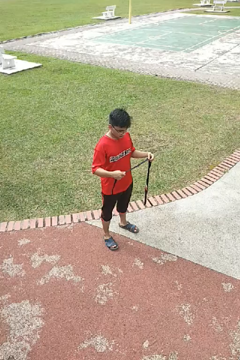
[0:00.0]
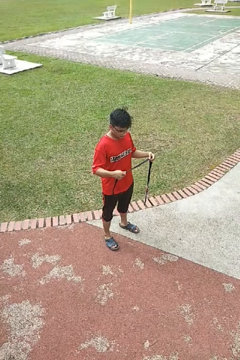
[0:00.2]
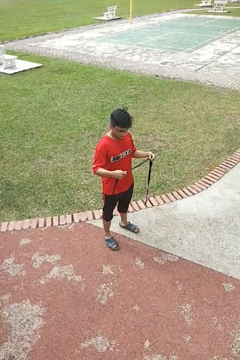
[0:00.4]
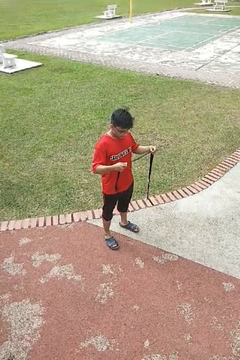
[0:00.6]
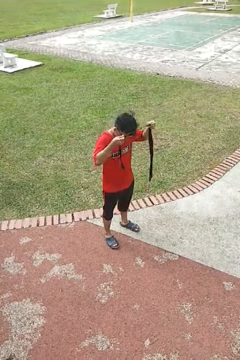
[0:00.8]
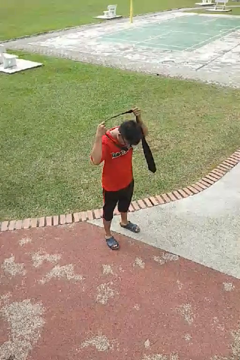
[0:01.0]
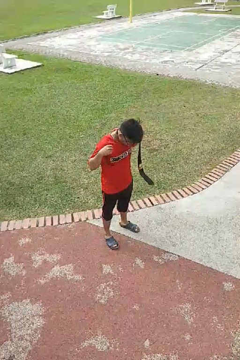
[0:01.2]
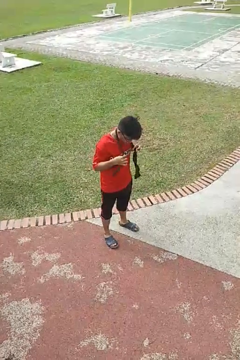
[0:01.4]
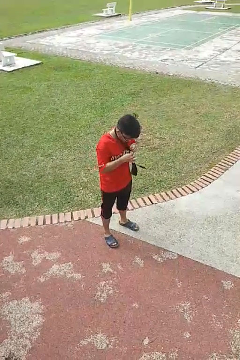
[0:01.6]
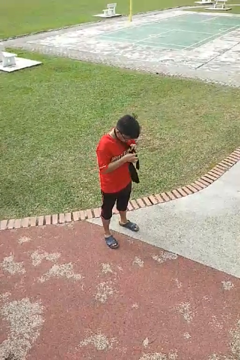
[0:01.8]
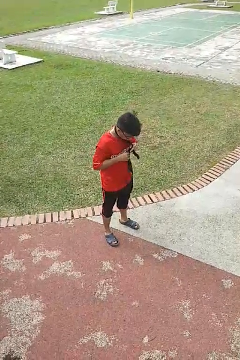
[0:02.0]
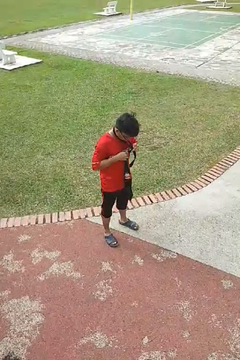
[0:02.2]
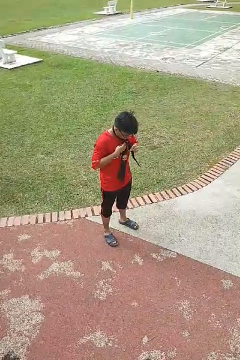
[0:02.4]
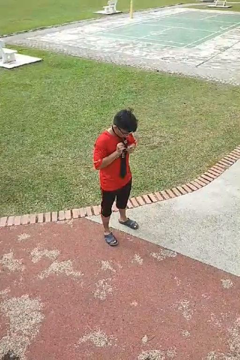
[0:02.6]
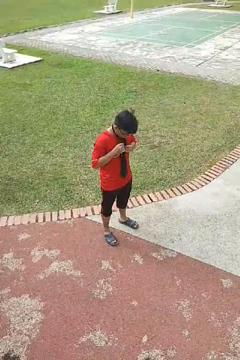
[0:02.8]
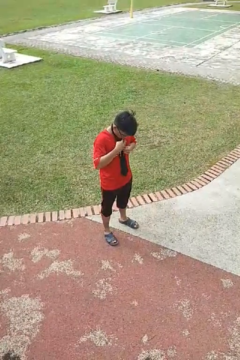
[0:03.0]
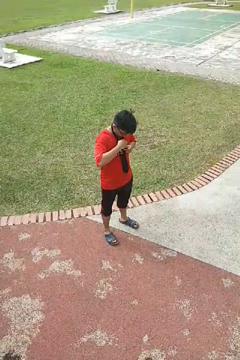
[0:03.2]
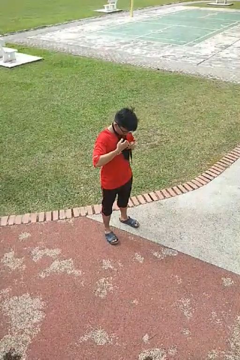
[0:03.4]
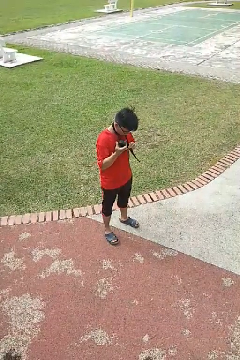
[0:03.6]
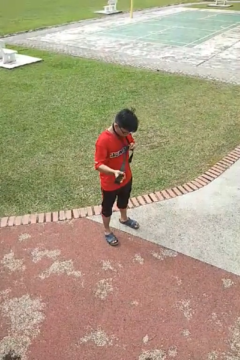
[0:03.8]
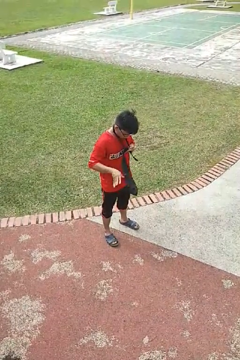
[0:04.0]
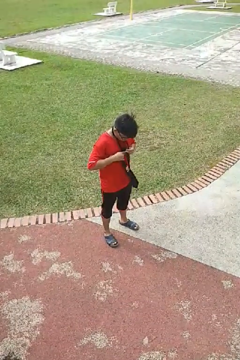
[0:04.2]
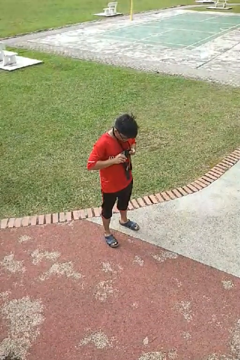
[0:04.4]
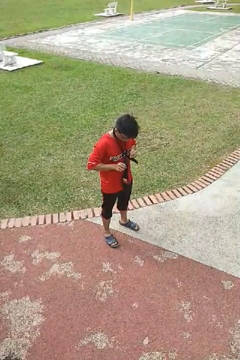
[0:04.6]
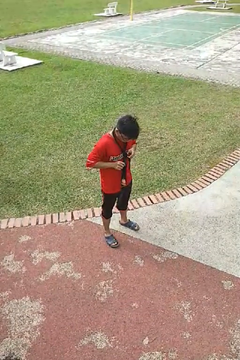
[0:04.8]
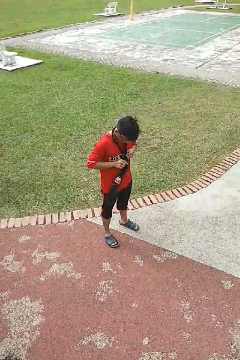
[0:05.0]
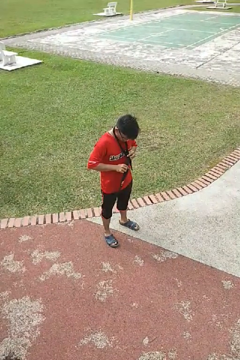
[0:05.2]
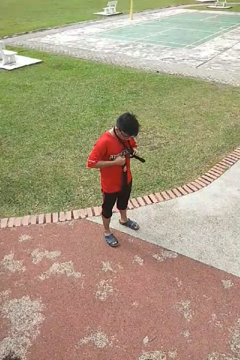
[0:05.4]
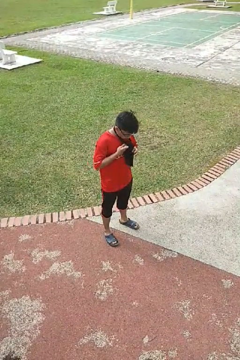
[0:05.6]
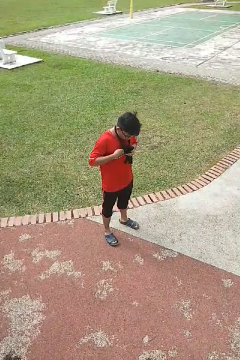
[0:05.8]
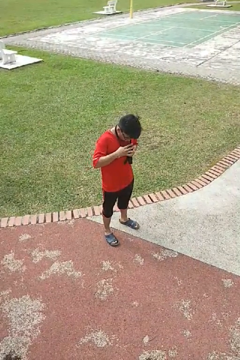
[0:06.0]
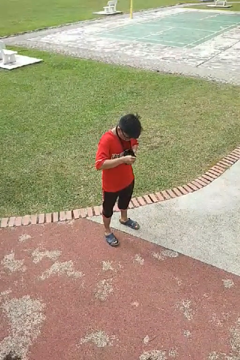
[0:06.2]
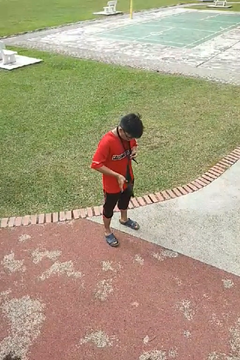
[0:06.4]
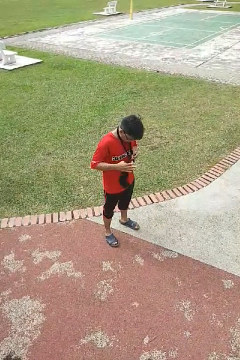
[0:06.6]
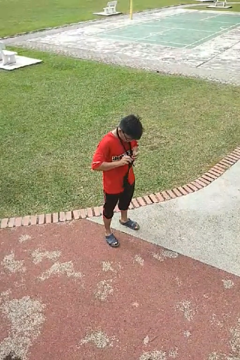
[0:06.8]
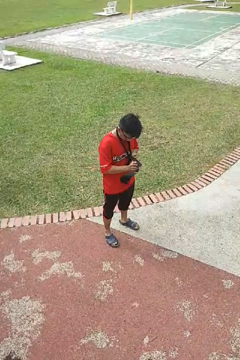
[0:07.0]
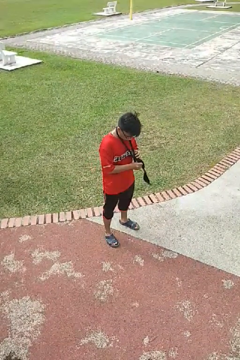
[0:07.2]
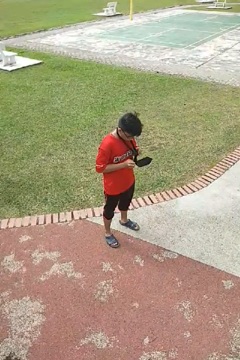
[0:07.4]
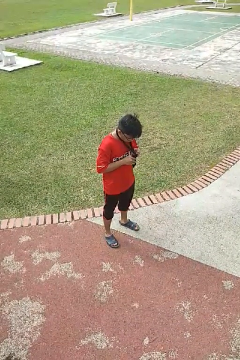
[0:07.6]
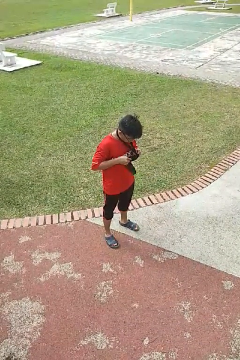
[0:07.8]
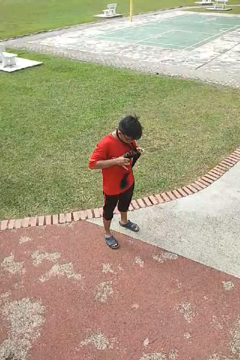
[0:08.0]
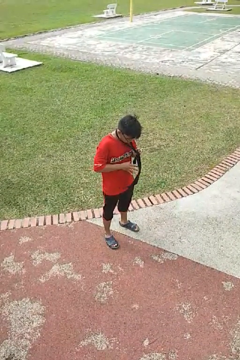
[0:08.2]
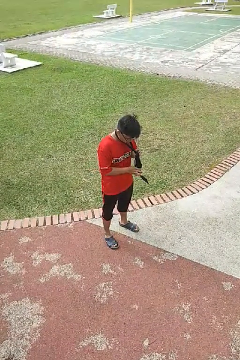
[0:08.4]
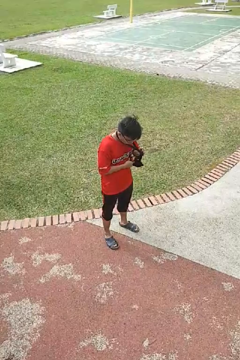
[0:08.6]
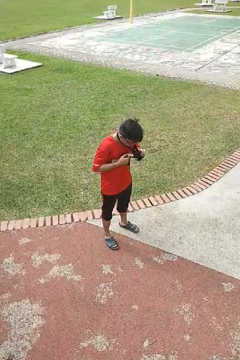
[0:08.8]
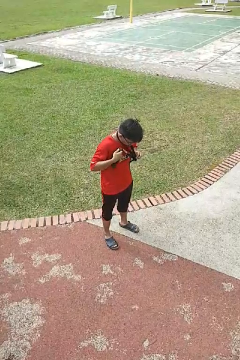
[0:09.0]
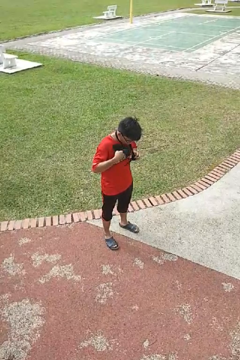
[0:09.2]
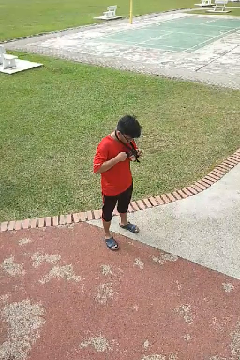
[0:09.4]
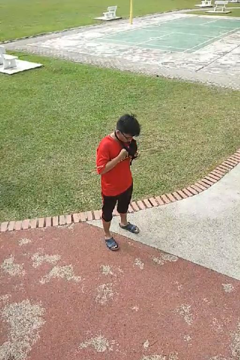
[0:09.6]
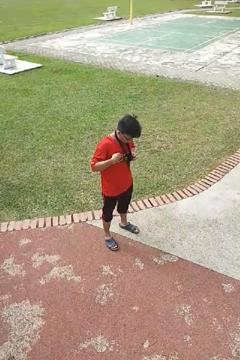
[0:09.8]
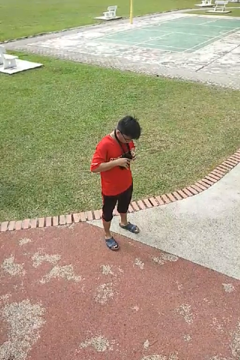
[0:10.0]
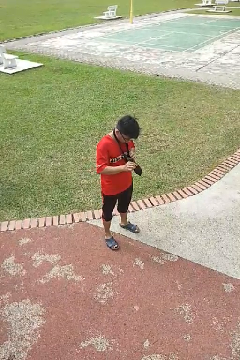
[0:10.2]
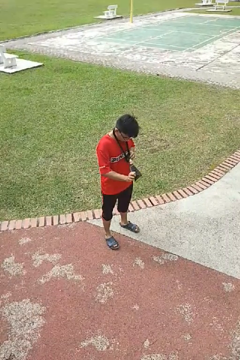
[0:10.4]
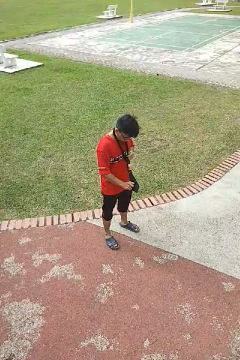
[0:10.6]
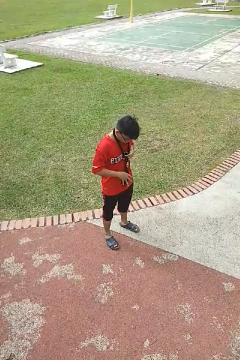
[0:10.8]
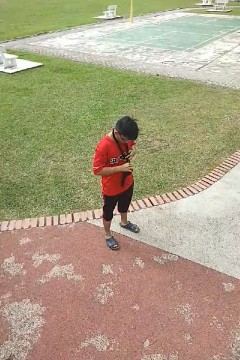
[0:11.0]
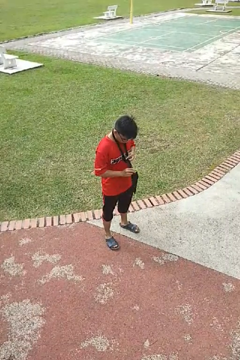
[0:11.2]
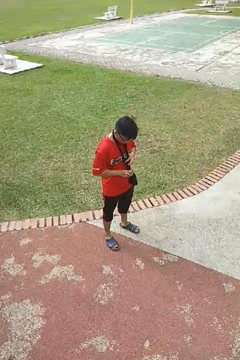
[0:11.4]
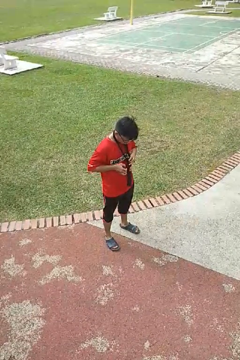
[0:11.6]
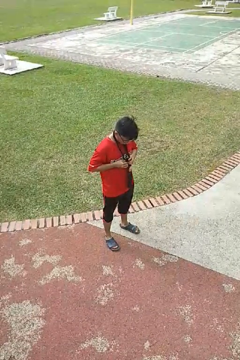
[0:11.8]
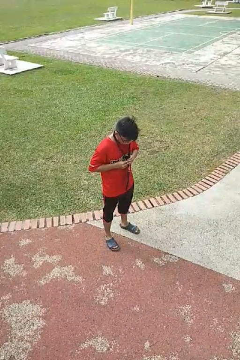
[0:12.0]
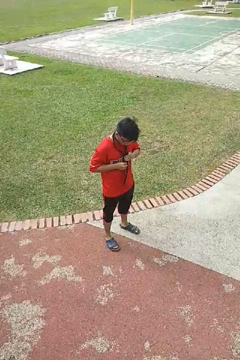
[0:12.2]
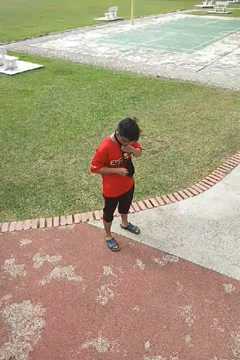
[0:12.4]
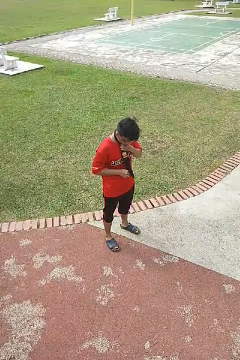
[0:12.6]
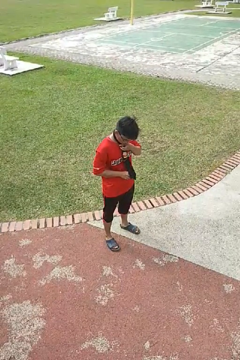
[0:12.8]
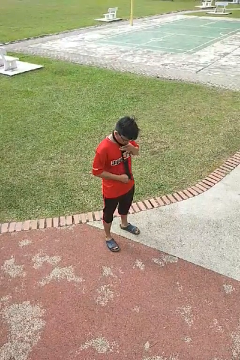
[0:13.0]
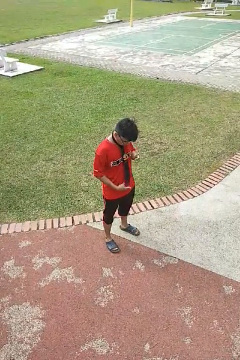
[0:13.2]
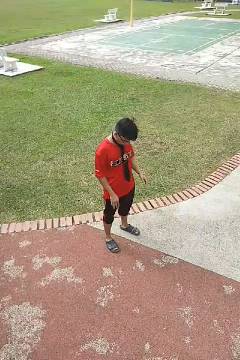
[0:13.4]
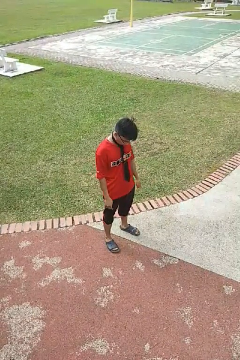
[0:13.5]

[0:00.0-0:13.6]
person puts on necktie

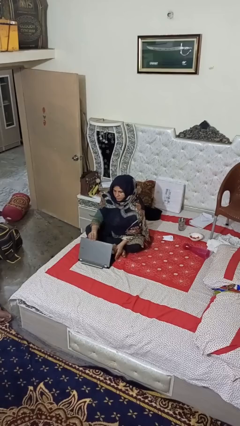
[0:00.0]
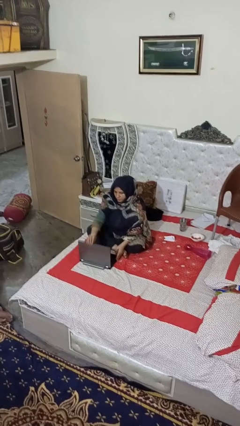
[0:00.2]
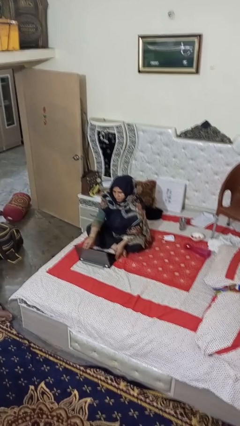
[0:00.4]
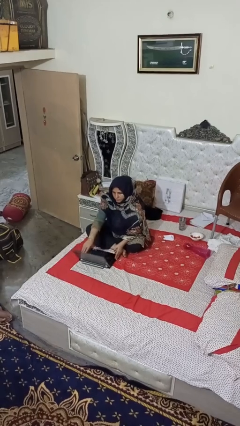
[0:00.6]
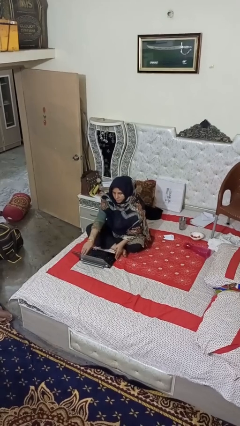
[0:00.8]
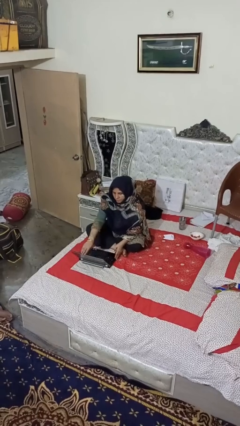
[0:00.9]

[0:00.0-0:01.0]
person opens laptop

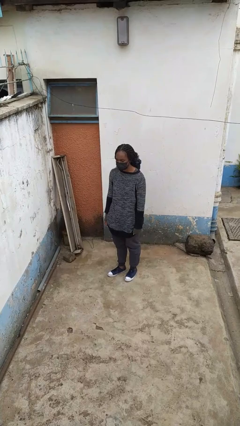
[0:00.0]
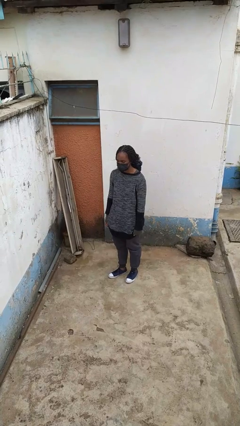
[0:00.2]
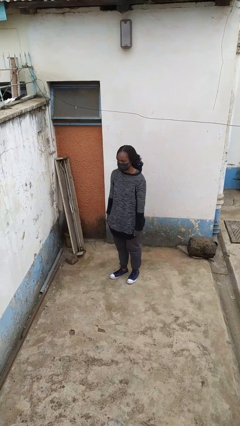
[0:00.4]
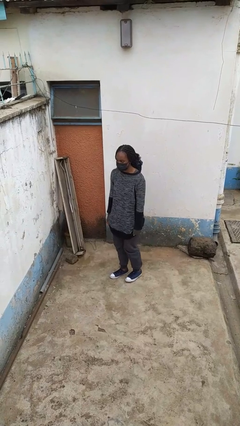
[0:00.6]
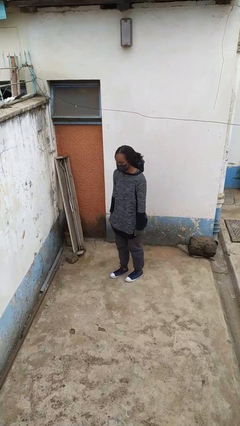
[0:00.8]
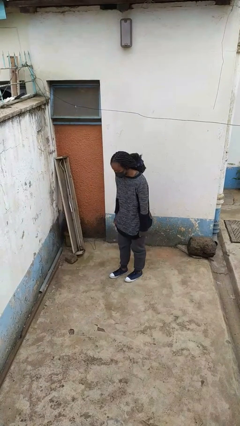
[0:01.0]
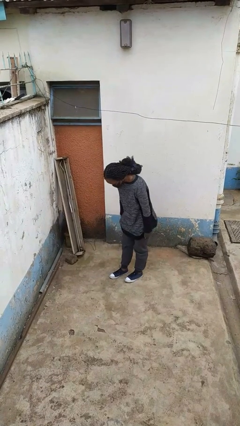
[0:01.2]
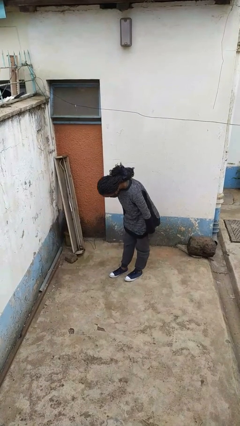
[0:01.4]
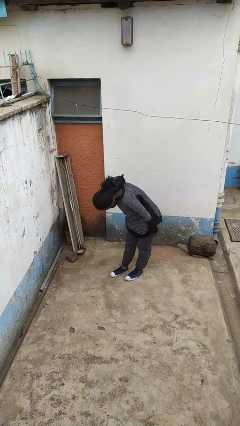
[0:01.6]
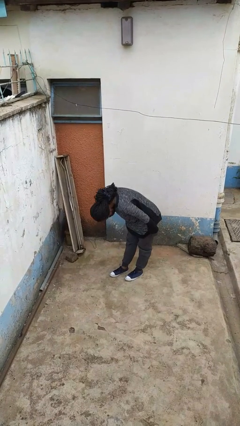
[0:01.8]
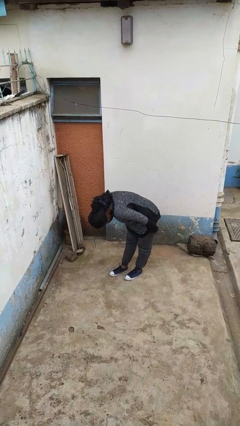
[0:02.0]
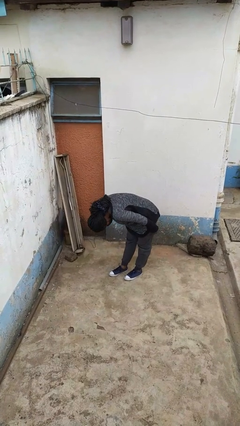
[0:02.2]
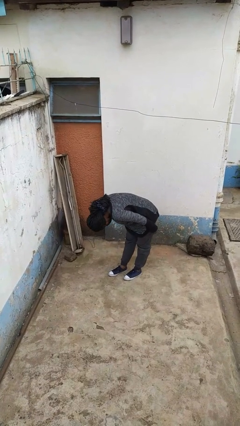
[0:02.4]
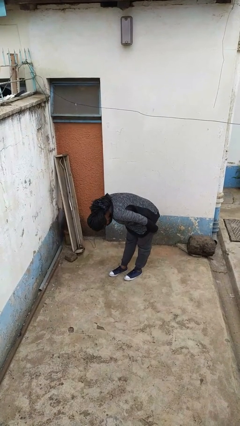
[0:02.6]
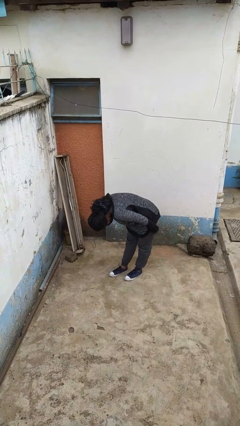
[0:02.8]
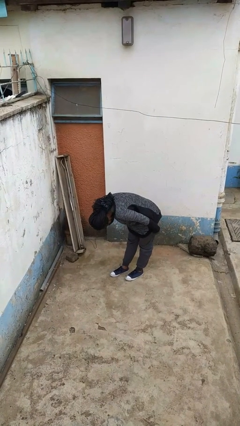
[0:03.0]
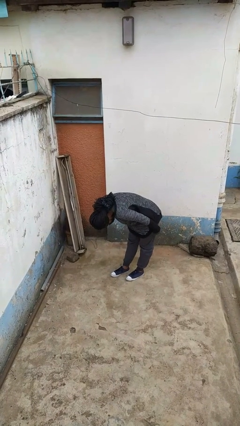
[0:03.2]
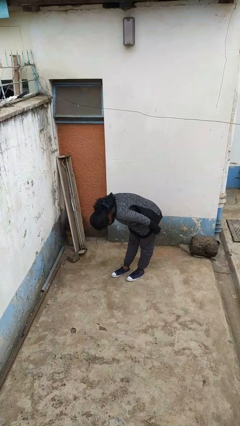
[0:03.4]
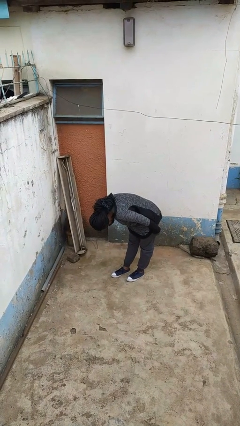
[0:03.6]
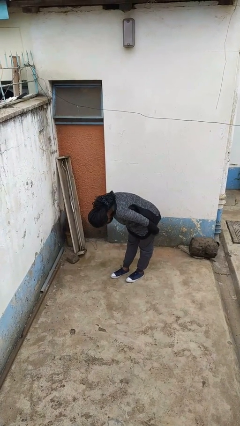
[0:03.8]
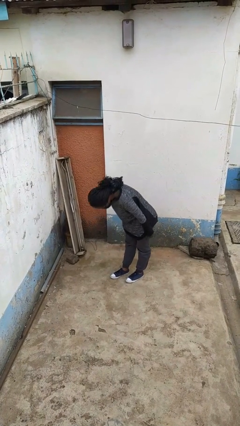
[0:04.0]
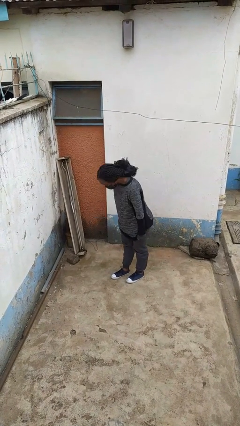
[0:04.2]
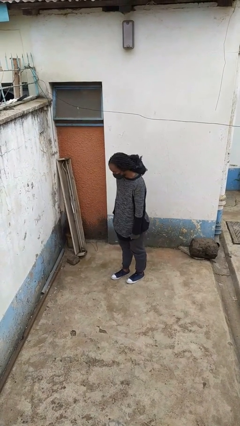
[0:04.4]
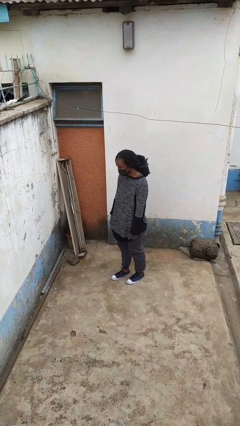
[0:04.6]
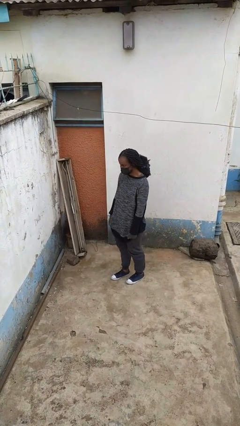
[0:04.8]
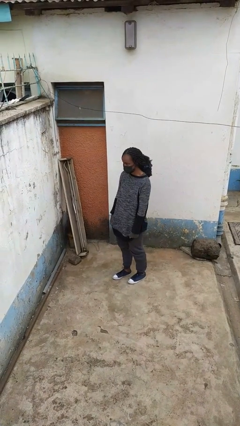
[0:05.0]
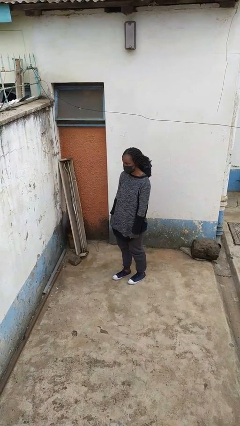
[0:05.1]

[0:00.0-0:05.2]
person bows
